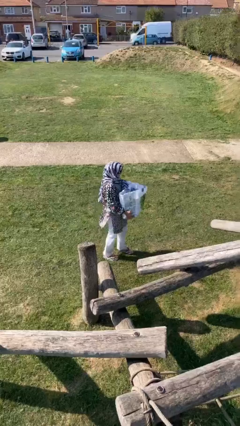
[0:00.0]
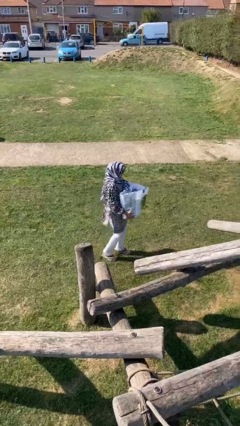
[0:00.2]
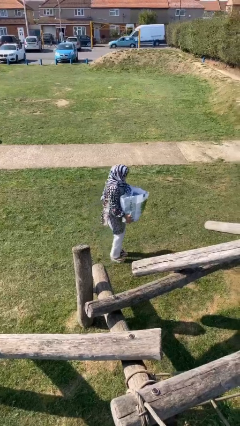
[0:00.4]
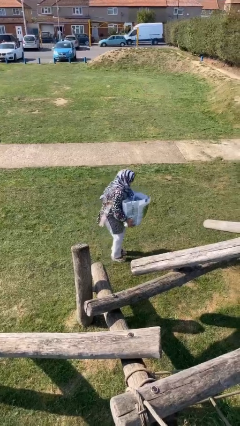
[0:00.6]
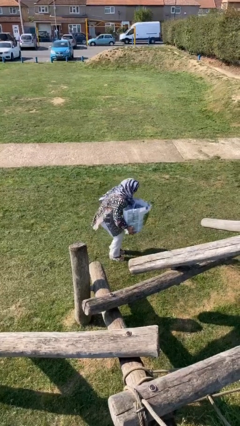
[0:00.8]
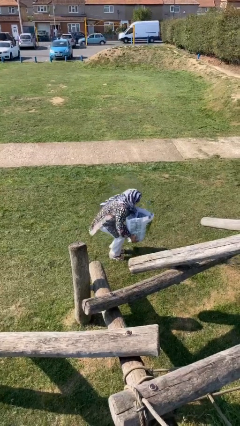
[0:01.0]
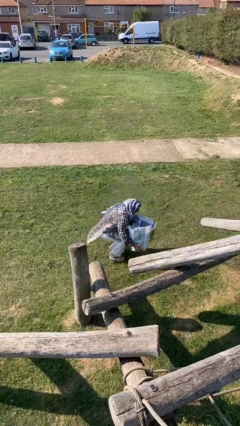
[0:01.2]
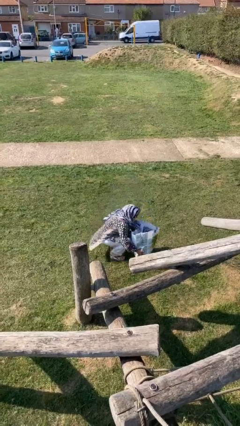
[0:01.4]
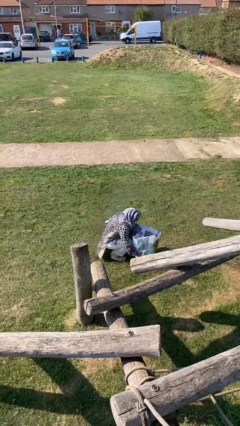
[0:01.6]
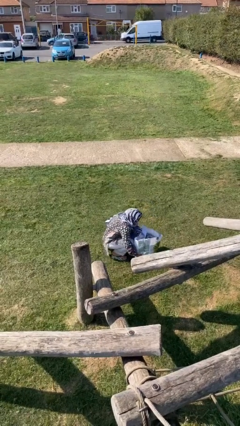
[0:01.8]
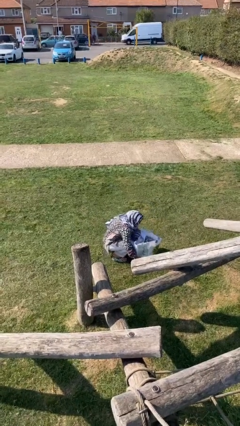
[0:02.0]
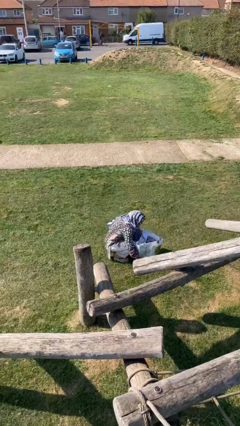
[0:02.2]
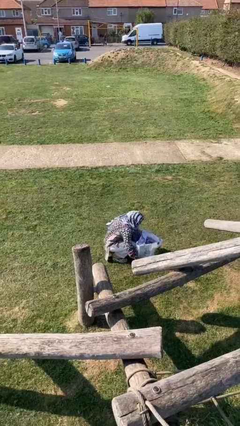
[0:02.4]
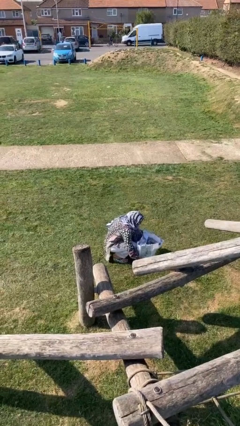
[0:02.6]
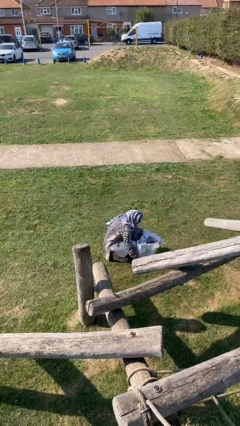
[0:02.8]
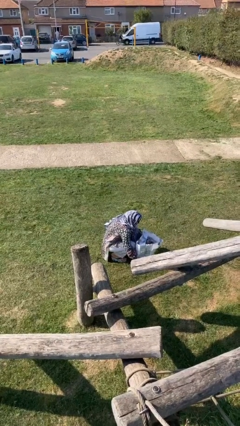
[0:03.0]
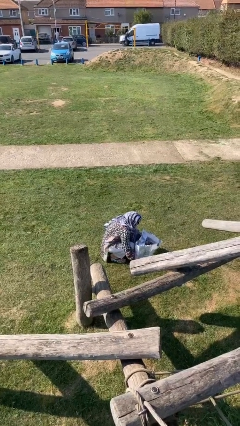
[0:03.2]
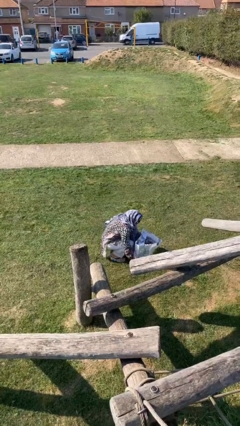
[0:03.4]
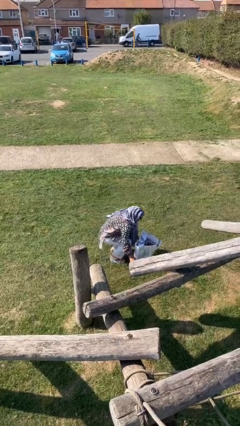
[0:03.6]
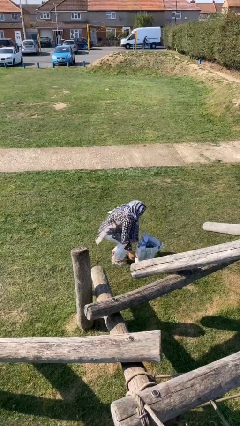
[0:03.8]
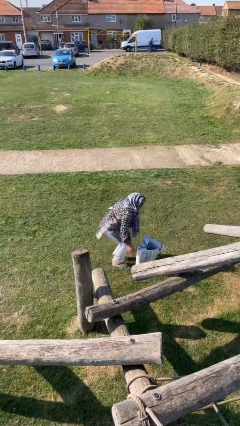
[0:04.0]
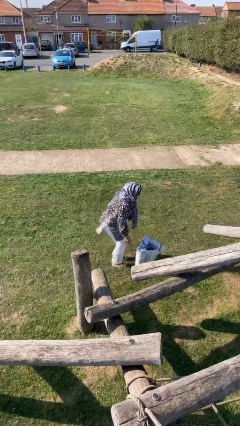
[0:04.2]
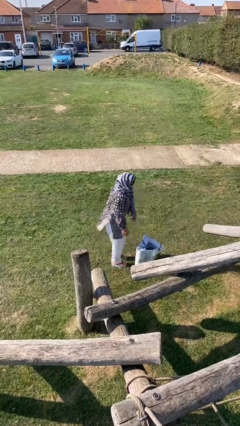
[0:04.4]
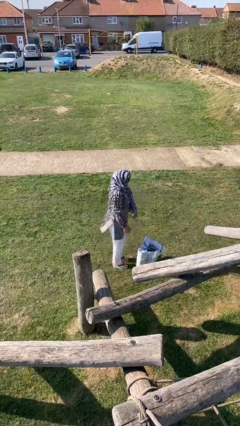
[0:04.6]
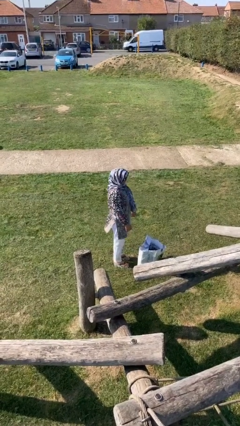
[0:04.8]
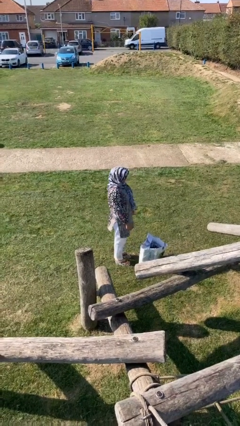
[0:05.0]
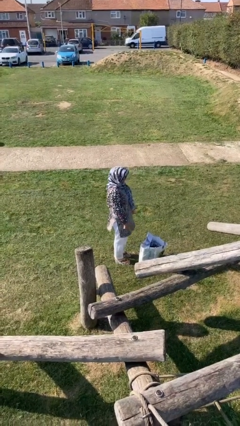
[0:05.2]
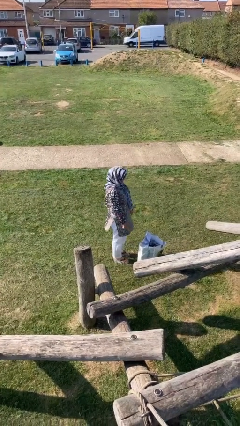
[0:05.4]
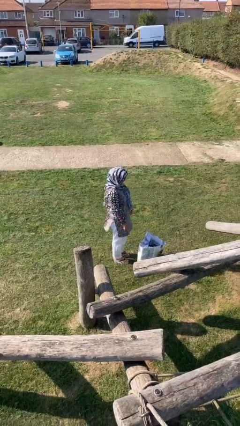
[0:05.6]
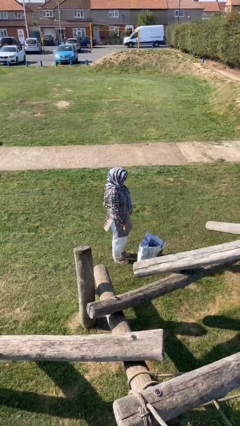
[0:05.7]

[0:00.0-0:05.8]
person puts down object on floor

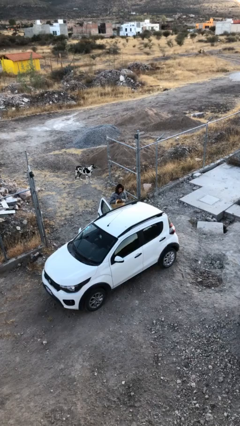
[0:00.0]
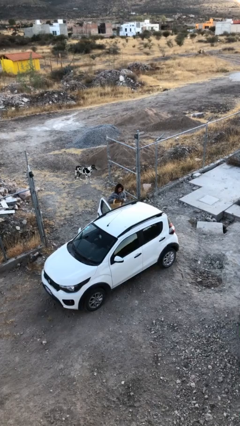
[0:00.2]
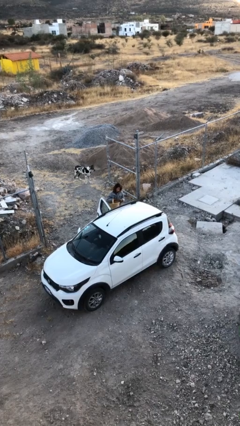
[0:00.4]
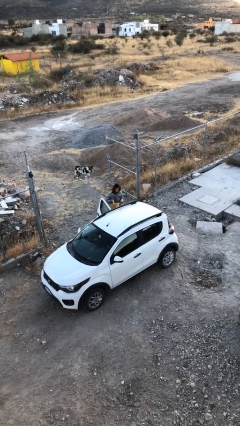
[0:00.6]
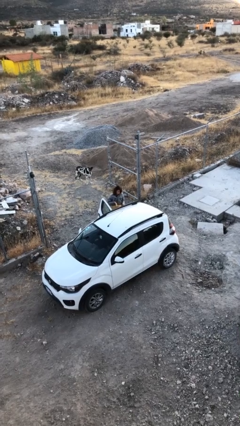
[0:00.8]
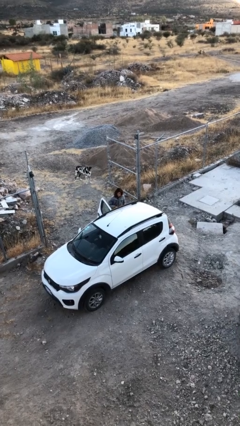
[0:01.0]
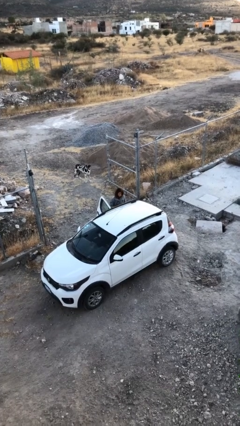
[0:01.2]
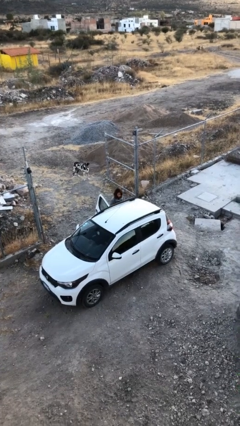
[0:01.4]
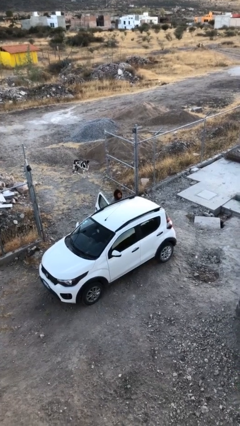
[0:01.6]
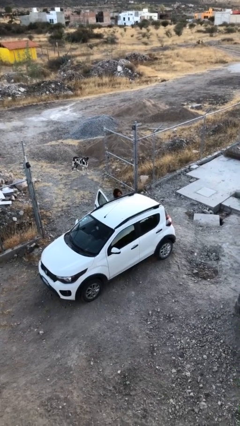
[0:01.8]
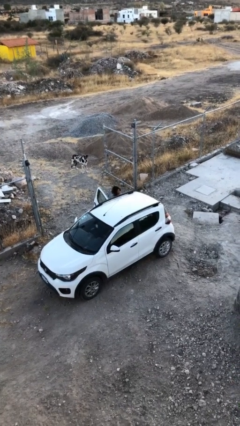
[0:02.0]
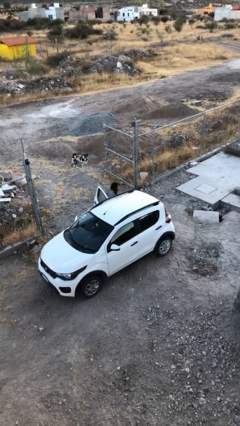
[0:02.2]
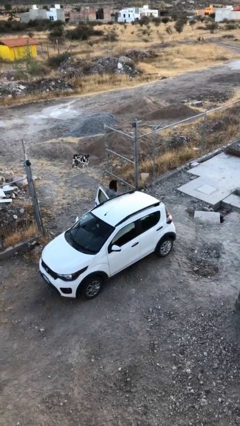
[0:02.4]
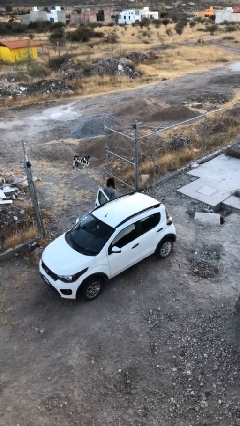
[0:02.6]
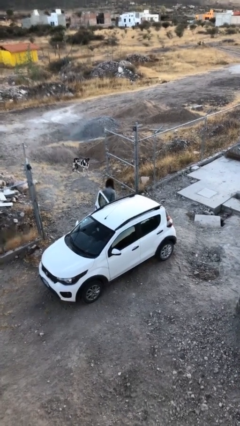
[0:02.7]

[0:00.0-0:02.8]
person loads car

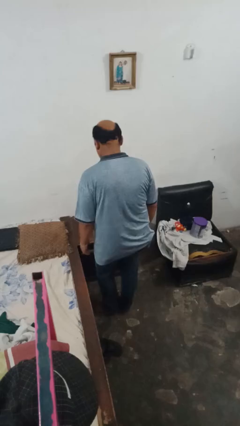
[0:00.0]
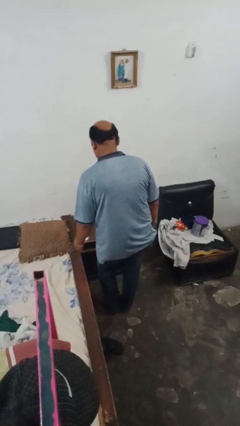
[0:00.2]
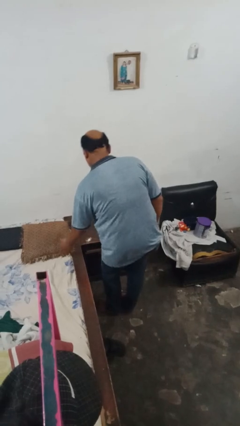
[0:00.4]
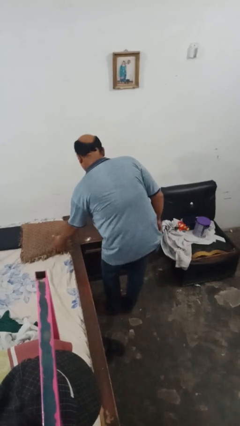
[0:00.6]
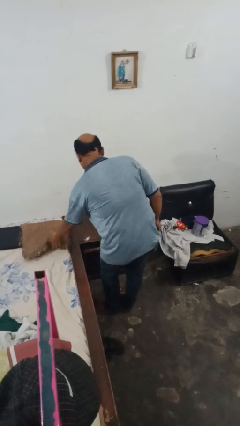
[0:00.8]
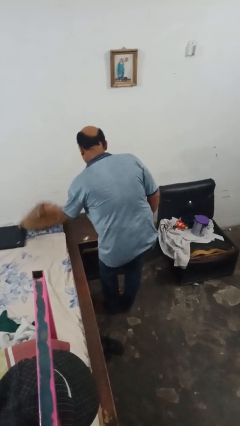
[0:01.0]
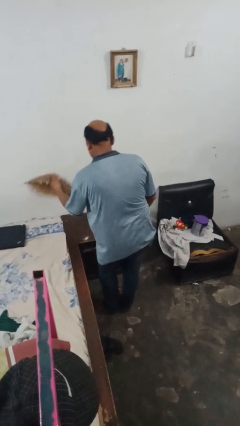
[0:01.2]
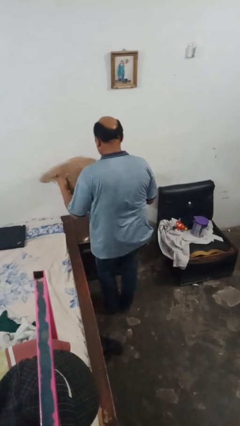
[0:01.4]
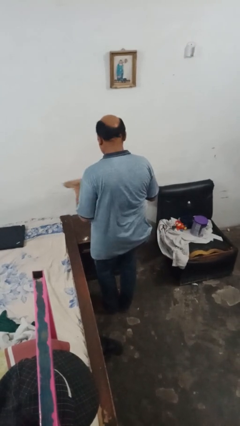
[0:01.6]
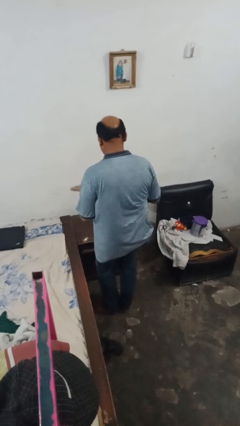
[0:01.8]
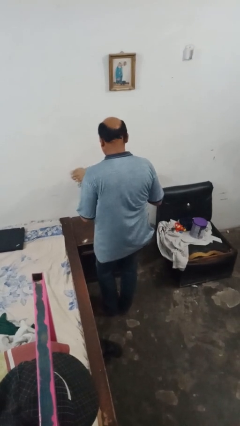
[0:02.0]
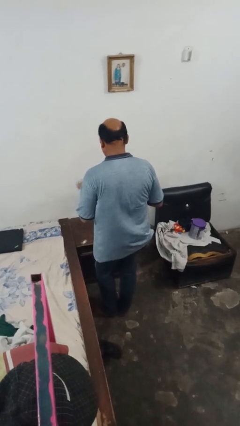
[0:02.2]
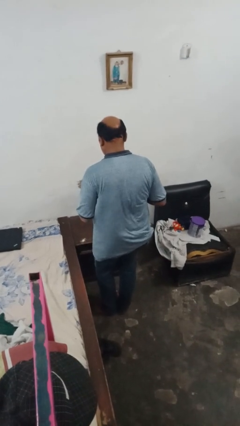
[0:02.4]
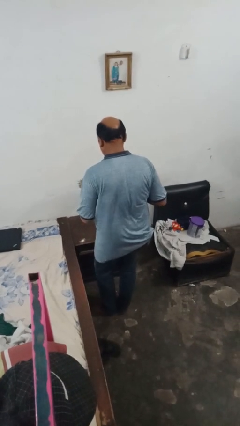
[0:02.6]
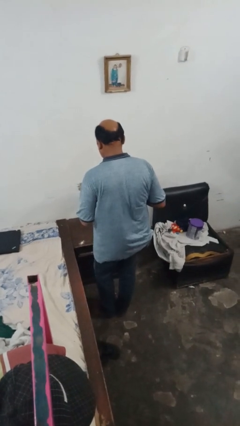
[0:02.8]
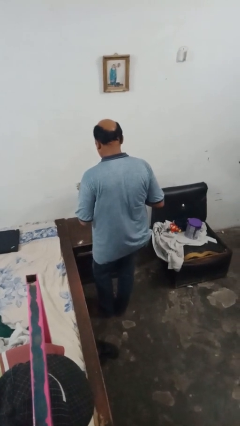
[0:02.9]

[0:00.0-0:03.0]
person picks up object from bed

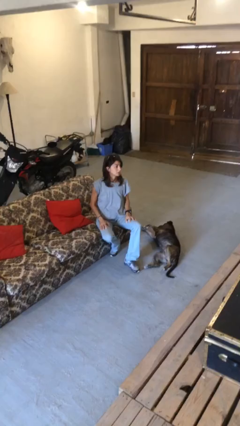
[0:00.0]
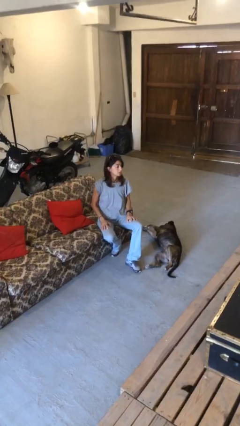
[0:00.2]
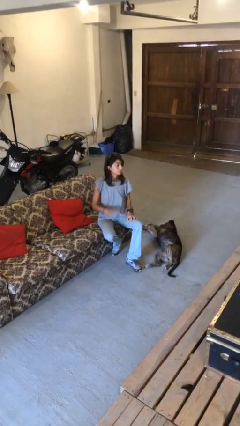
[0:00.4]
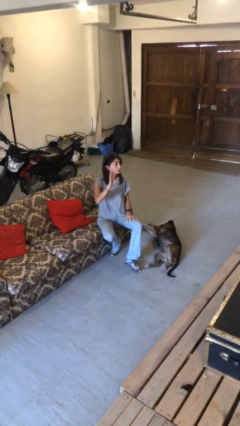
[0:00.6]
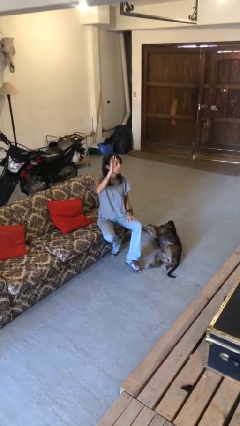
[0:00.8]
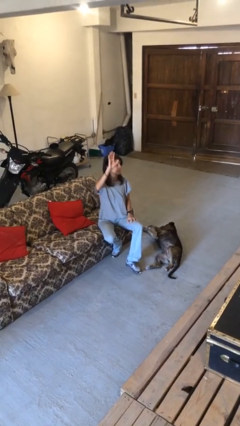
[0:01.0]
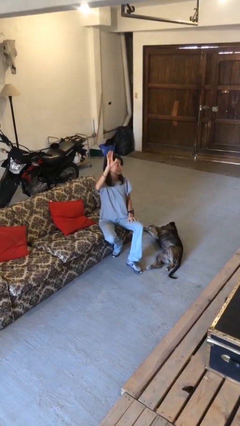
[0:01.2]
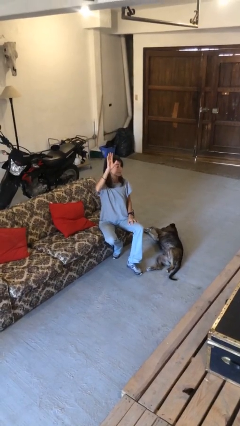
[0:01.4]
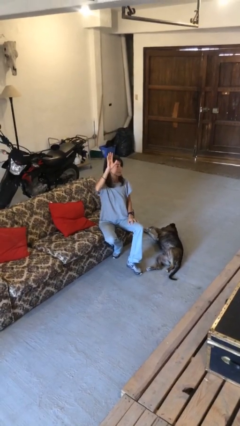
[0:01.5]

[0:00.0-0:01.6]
person gestures raise hand

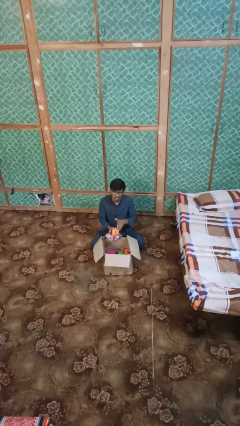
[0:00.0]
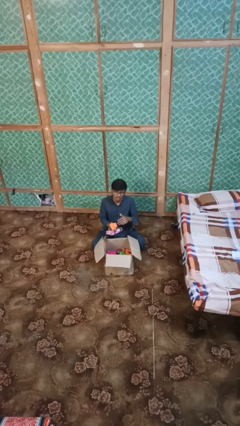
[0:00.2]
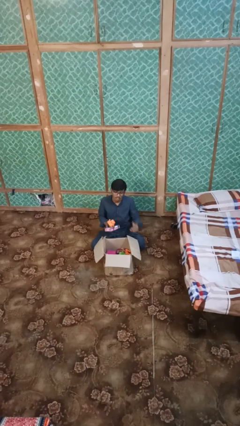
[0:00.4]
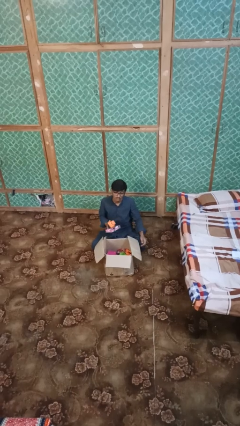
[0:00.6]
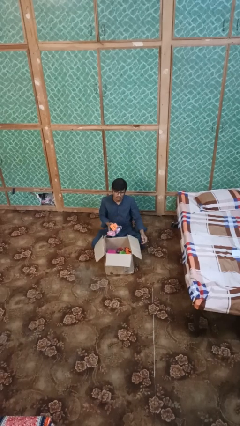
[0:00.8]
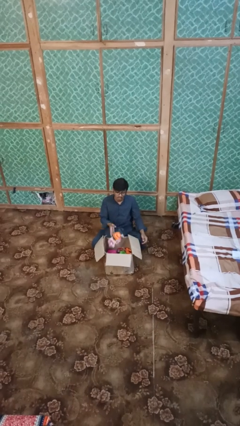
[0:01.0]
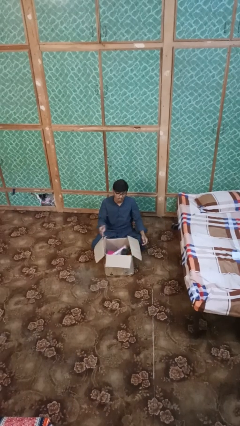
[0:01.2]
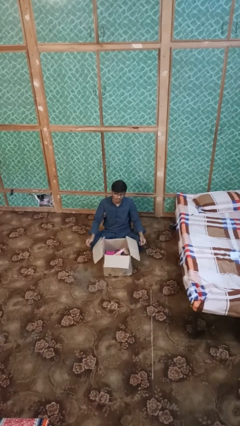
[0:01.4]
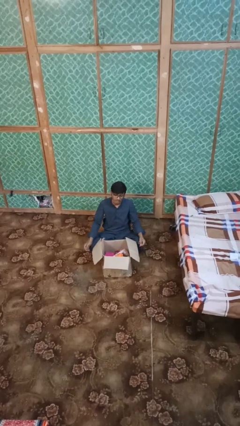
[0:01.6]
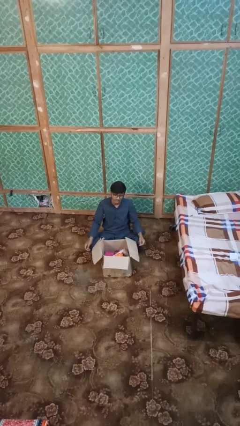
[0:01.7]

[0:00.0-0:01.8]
person puts object into box

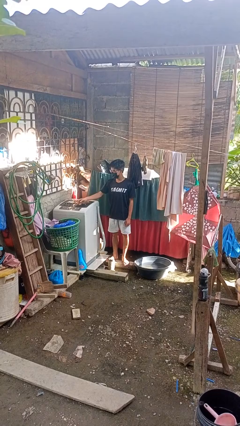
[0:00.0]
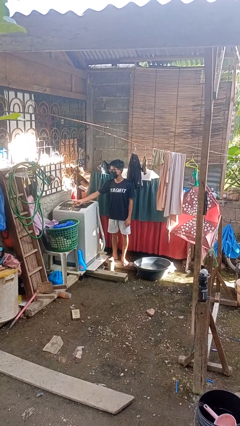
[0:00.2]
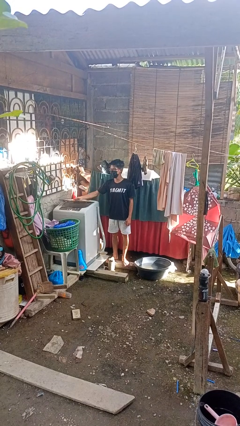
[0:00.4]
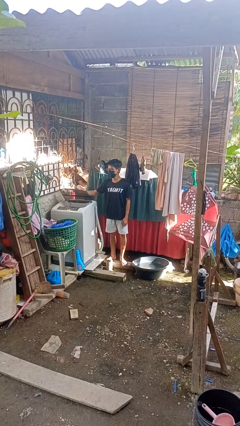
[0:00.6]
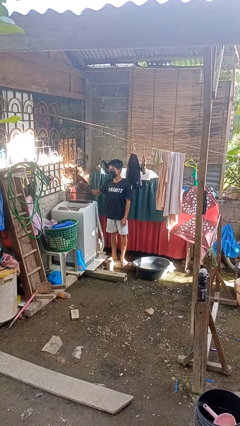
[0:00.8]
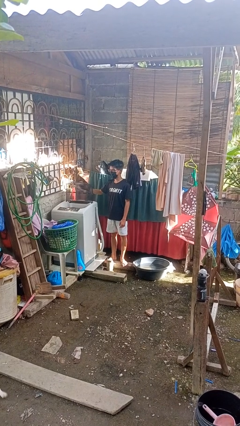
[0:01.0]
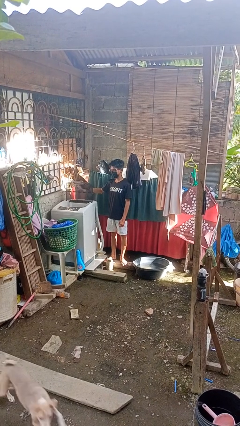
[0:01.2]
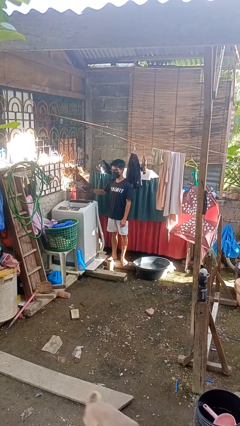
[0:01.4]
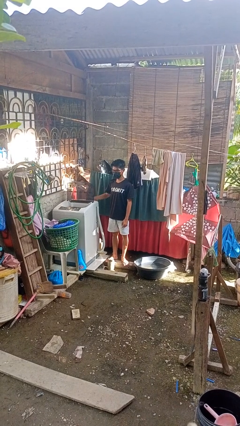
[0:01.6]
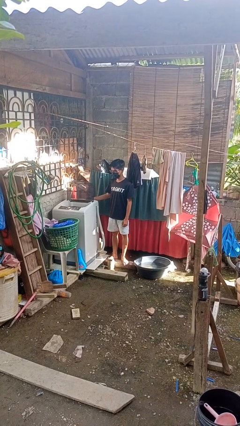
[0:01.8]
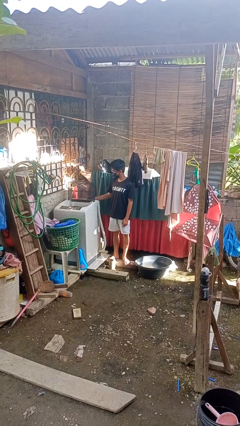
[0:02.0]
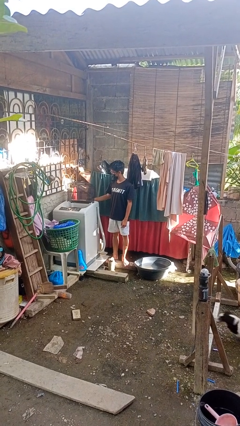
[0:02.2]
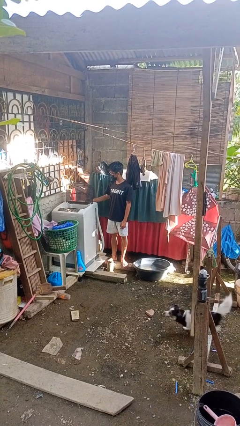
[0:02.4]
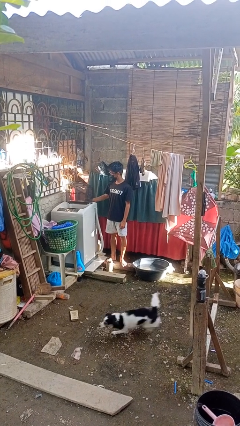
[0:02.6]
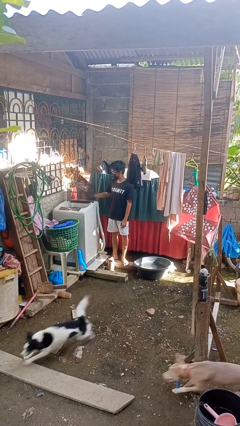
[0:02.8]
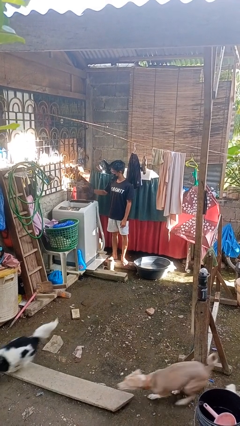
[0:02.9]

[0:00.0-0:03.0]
person opens clothes washer
